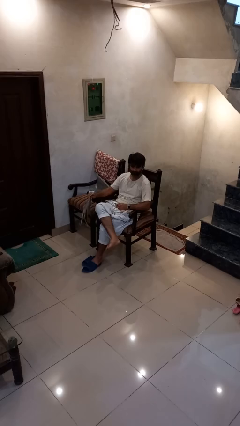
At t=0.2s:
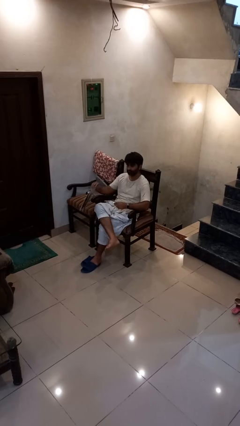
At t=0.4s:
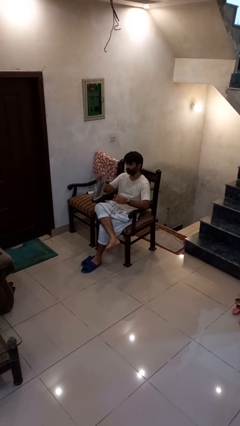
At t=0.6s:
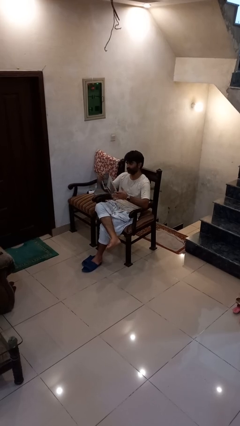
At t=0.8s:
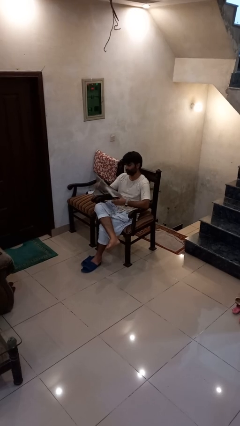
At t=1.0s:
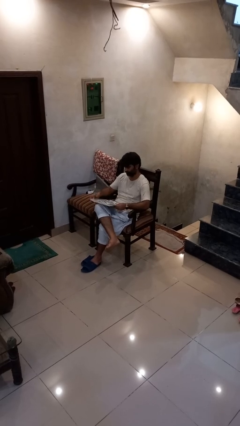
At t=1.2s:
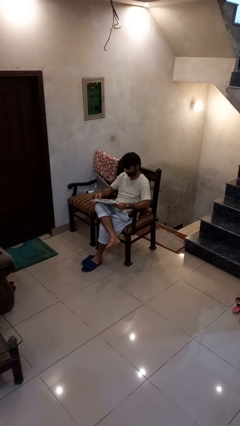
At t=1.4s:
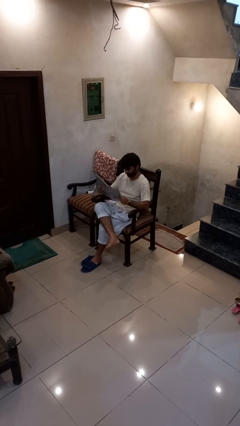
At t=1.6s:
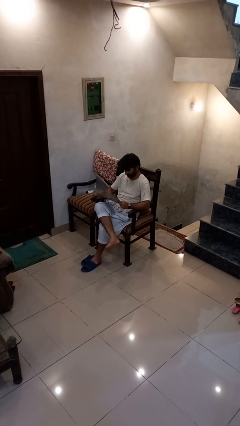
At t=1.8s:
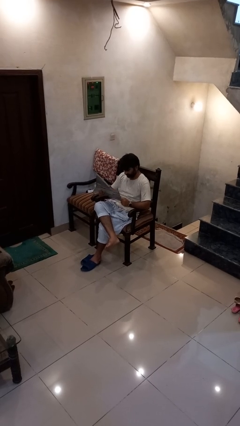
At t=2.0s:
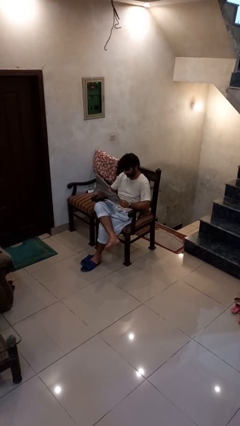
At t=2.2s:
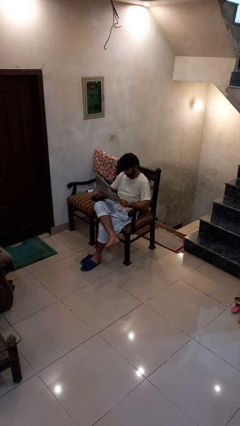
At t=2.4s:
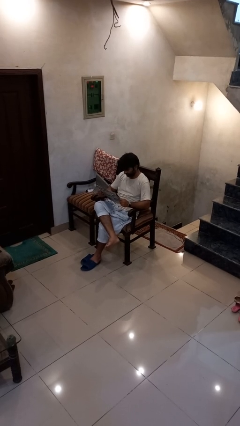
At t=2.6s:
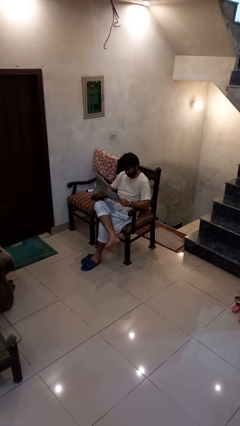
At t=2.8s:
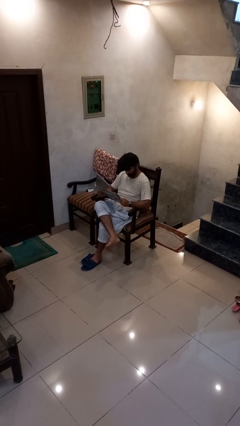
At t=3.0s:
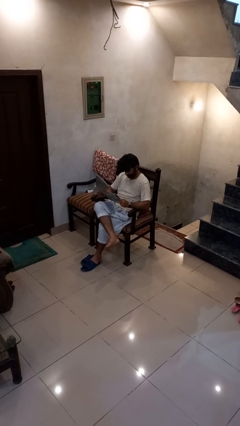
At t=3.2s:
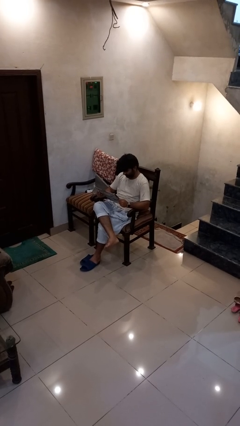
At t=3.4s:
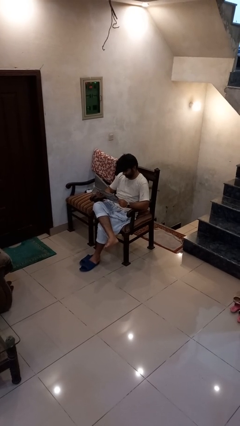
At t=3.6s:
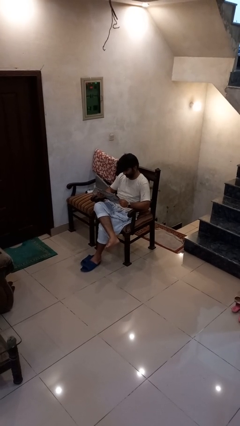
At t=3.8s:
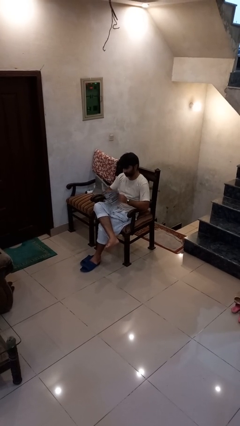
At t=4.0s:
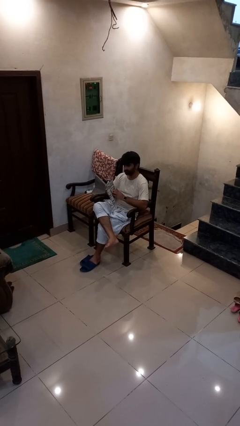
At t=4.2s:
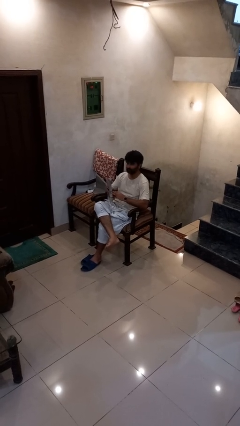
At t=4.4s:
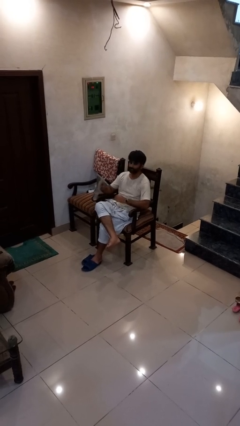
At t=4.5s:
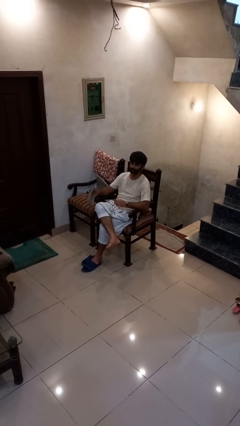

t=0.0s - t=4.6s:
person reads newspaper

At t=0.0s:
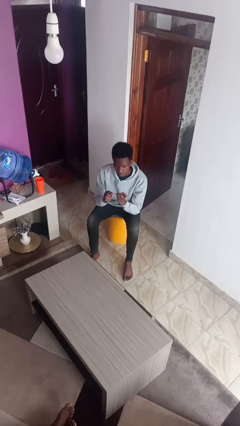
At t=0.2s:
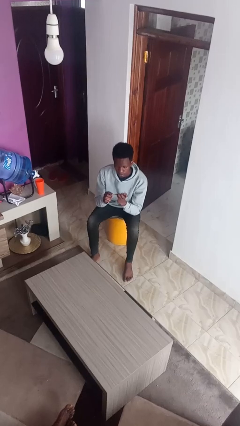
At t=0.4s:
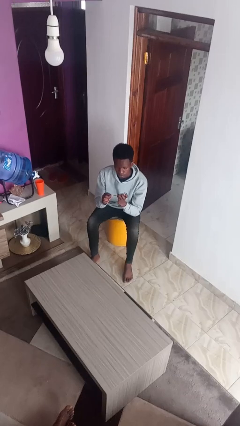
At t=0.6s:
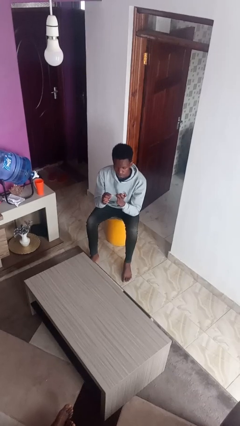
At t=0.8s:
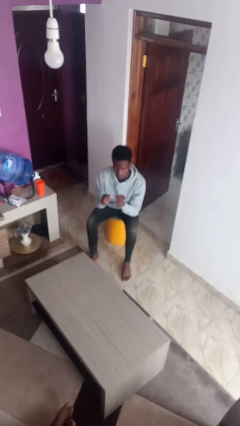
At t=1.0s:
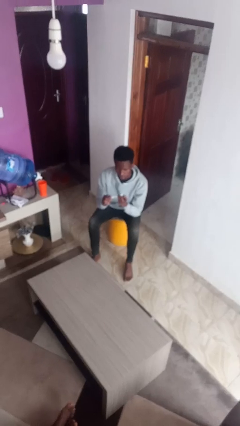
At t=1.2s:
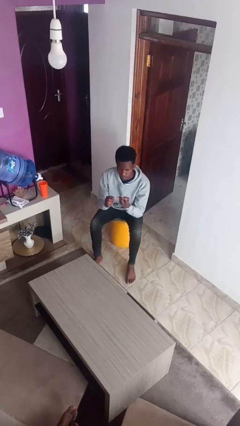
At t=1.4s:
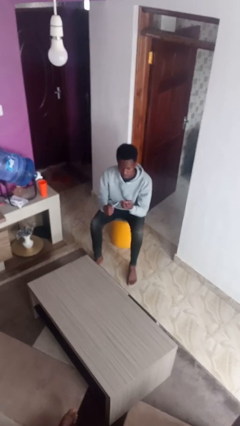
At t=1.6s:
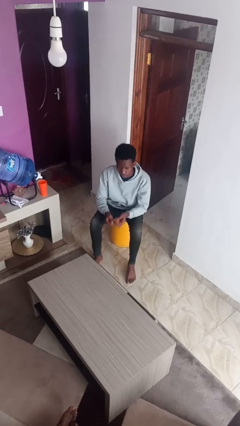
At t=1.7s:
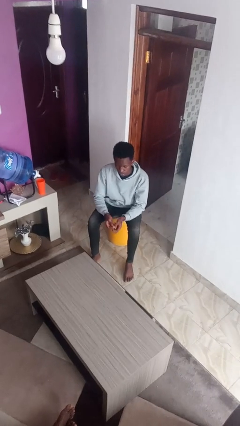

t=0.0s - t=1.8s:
person files fingernails

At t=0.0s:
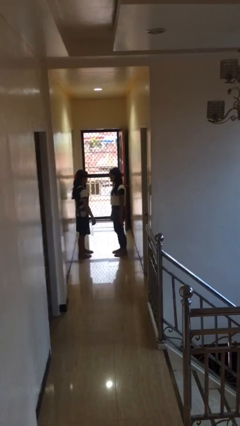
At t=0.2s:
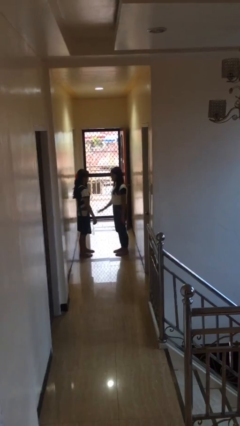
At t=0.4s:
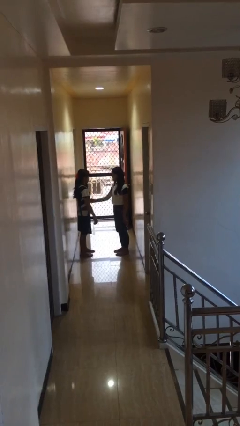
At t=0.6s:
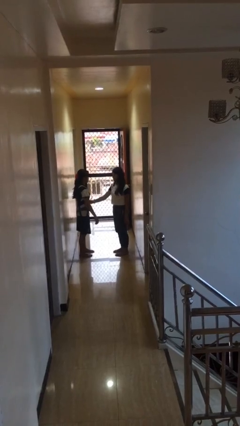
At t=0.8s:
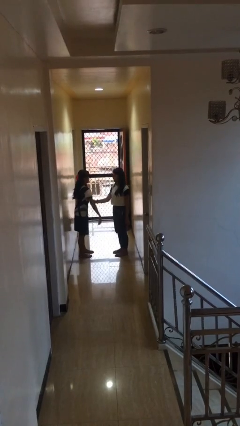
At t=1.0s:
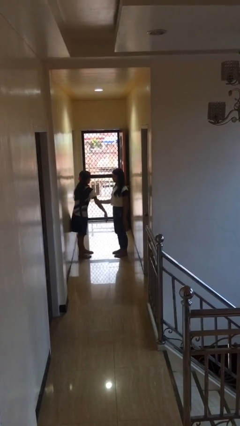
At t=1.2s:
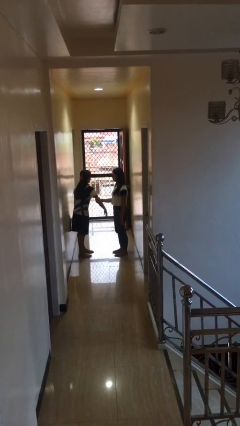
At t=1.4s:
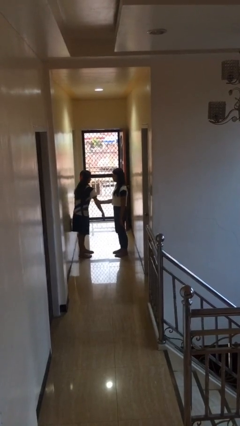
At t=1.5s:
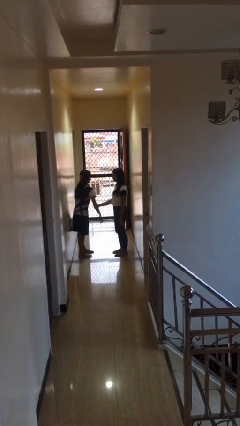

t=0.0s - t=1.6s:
person grabs person by bicep

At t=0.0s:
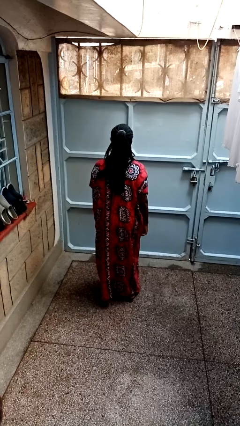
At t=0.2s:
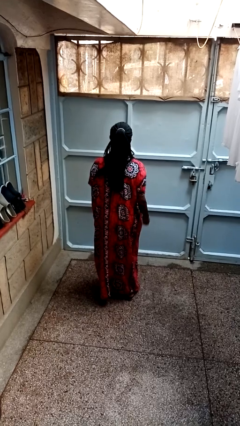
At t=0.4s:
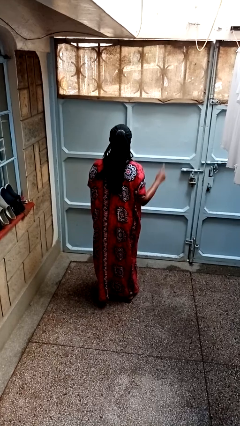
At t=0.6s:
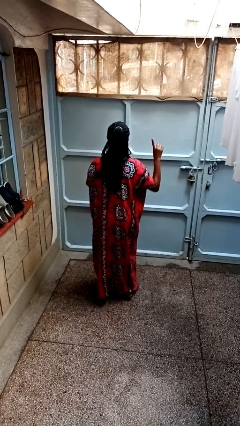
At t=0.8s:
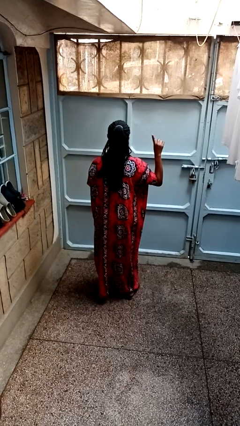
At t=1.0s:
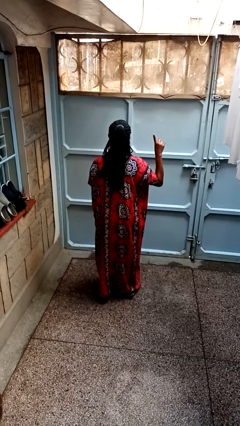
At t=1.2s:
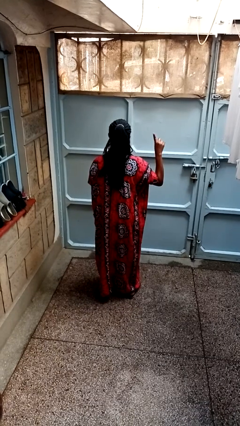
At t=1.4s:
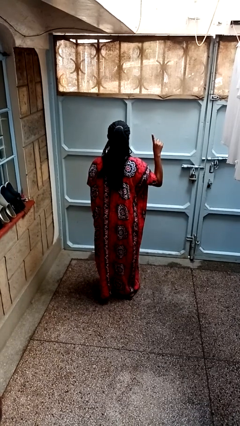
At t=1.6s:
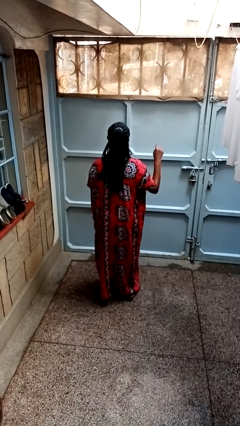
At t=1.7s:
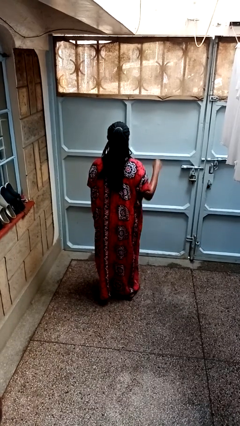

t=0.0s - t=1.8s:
person gestures number one

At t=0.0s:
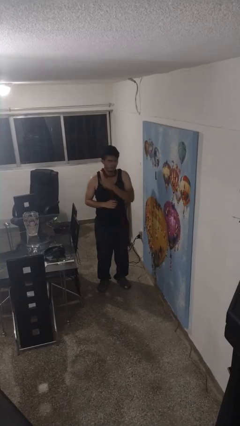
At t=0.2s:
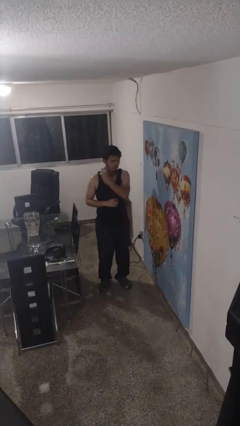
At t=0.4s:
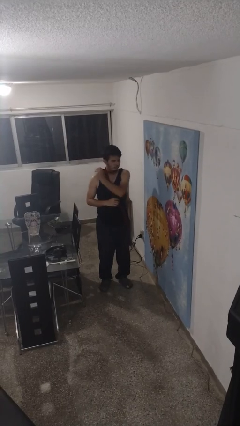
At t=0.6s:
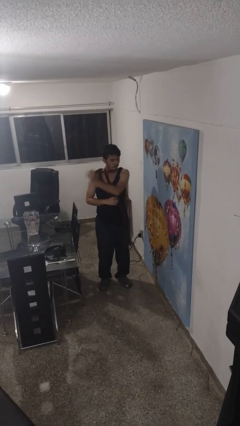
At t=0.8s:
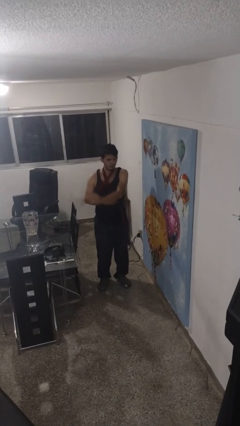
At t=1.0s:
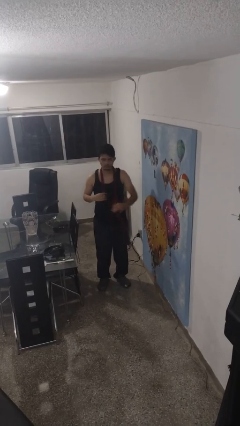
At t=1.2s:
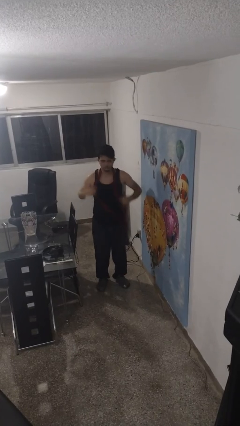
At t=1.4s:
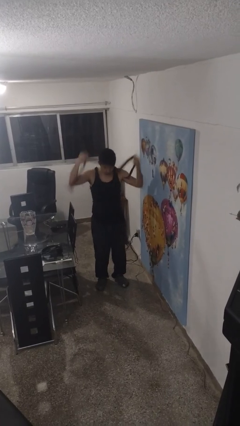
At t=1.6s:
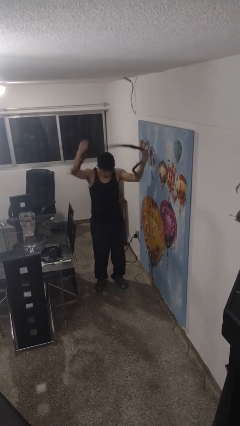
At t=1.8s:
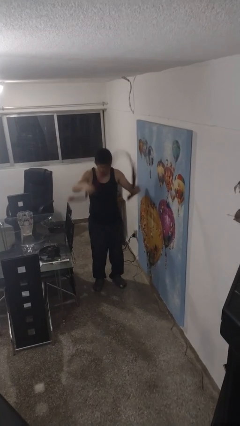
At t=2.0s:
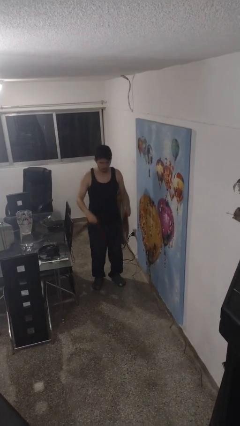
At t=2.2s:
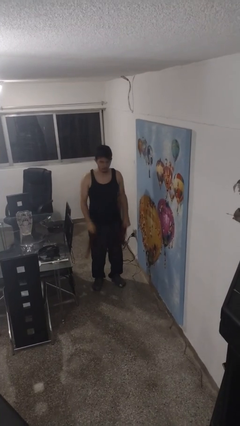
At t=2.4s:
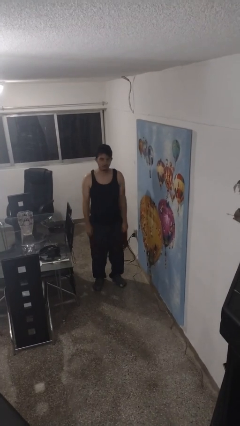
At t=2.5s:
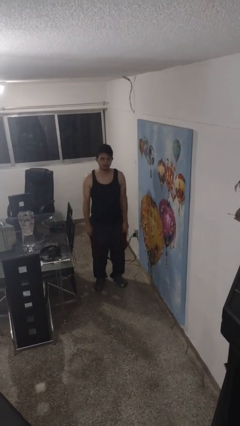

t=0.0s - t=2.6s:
person takes off scarf

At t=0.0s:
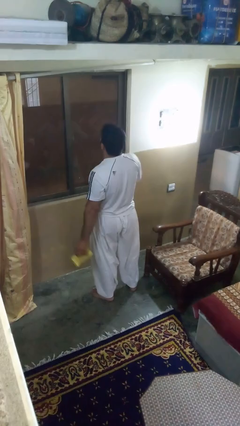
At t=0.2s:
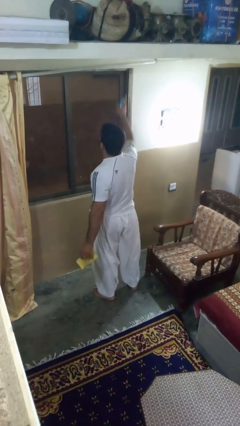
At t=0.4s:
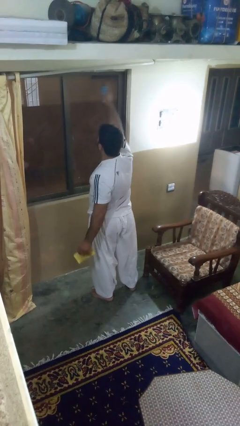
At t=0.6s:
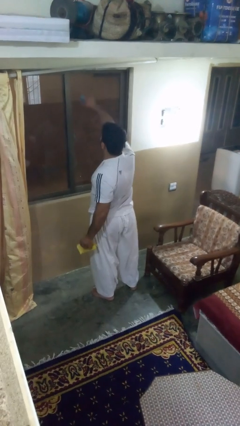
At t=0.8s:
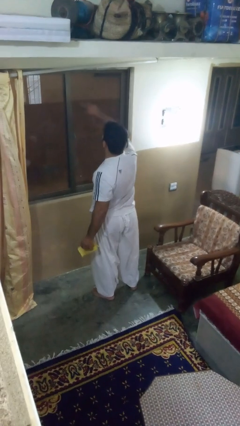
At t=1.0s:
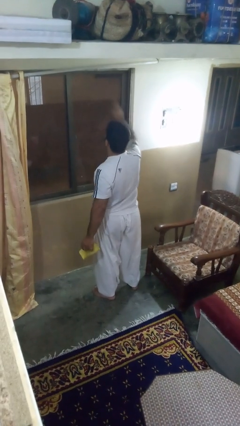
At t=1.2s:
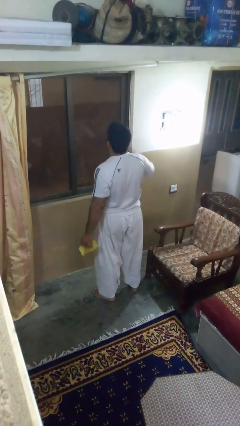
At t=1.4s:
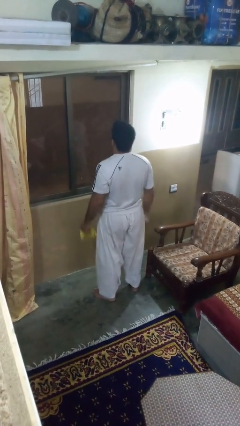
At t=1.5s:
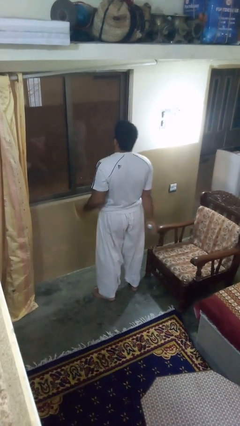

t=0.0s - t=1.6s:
person sprays from bottle

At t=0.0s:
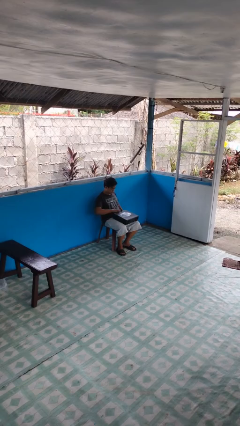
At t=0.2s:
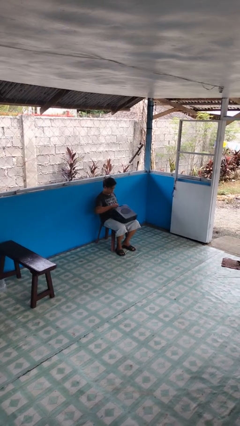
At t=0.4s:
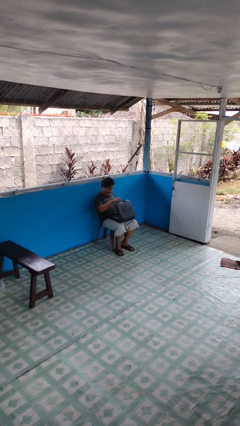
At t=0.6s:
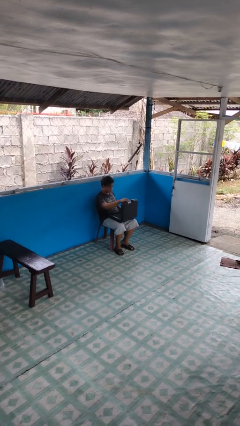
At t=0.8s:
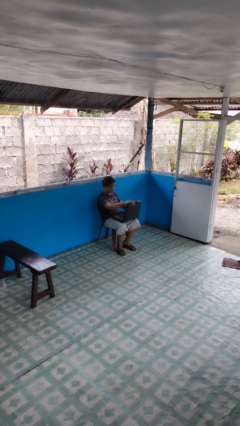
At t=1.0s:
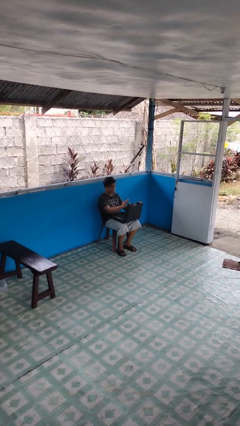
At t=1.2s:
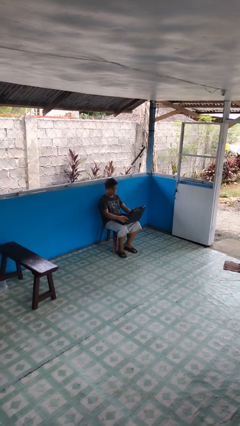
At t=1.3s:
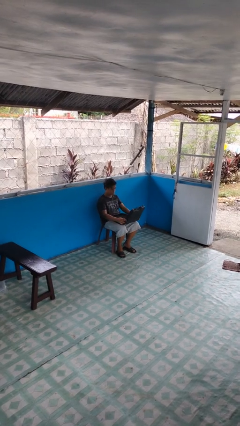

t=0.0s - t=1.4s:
person opens suitcase

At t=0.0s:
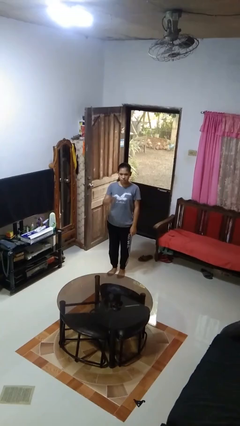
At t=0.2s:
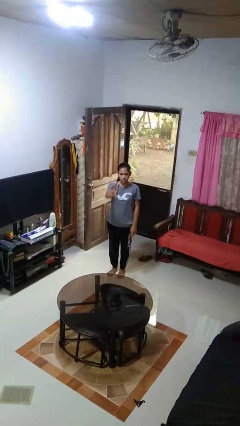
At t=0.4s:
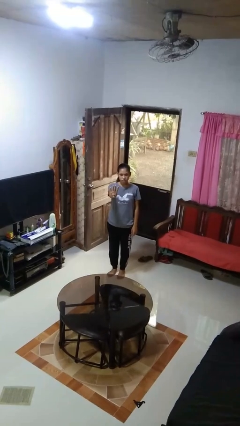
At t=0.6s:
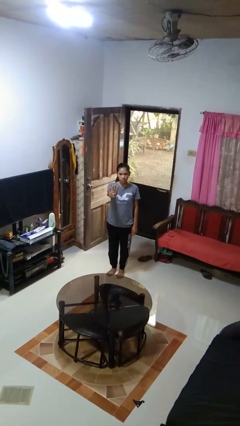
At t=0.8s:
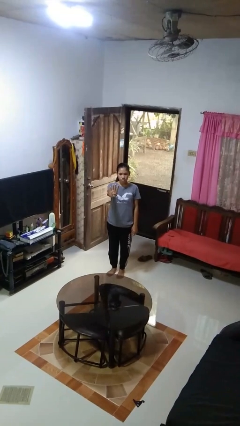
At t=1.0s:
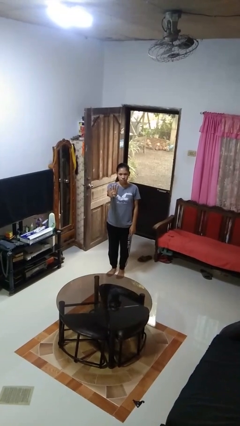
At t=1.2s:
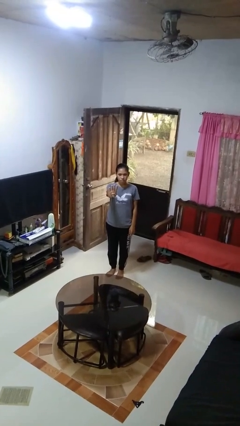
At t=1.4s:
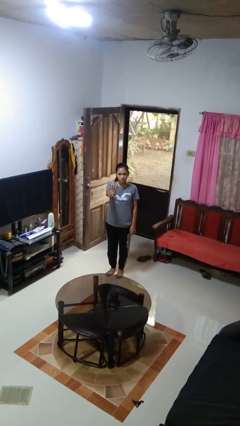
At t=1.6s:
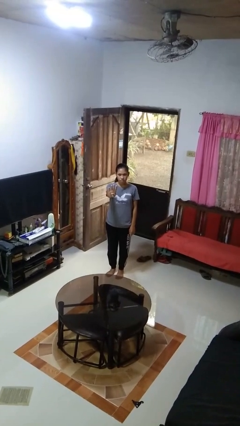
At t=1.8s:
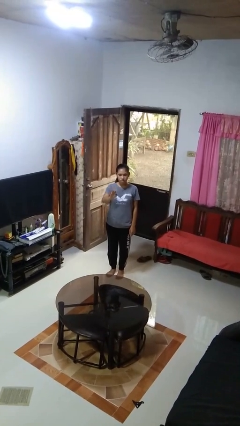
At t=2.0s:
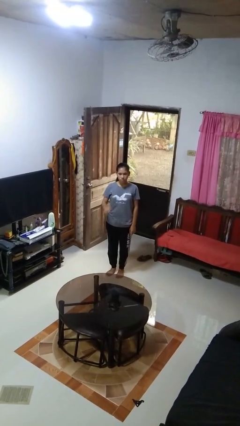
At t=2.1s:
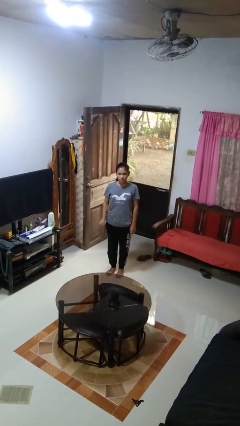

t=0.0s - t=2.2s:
person gestures number four
